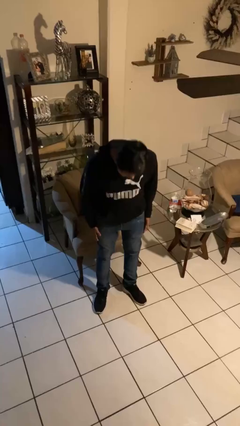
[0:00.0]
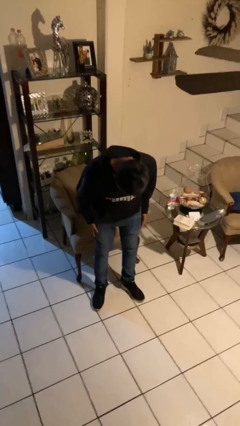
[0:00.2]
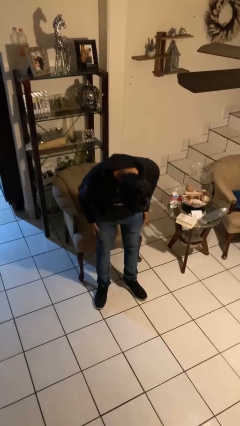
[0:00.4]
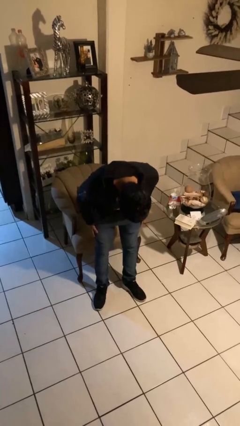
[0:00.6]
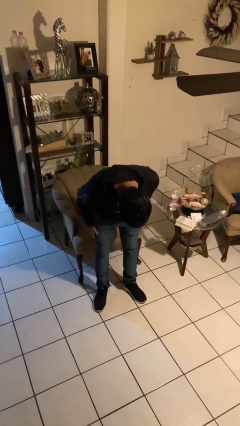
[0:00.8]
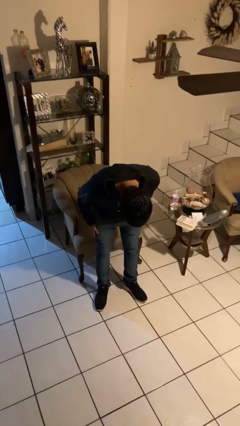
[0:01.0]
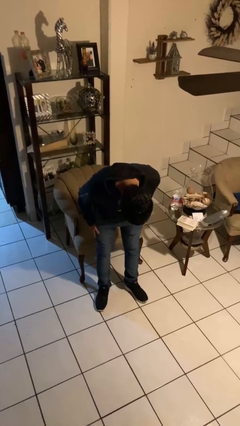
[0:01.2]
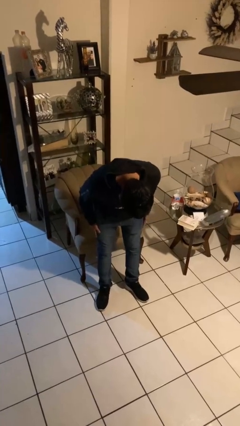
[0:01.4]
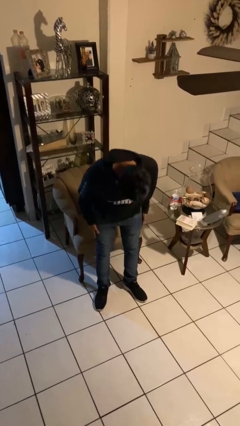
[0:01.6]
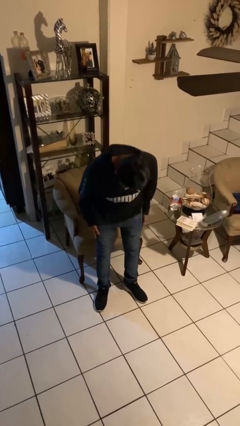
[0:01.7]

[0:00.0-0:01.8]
person bows

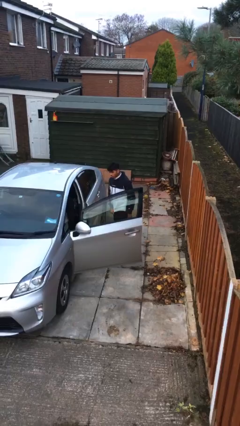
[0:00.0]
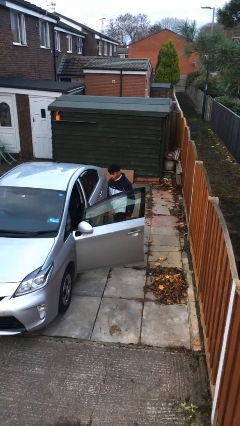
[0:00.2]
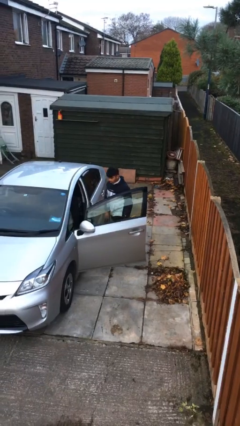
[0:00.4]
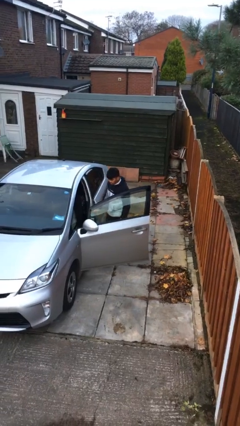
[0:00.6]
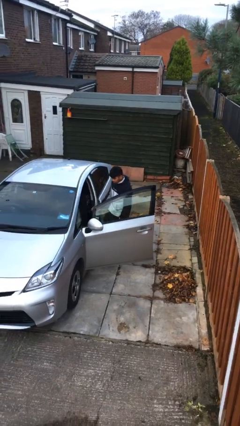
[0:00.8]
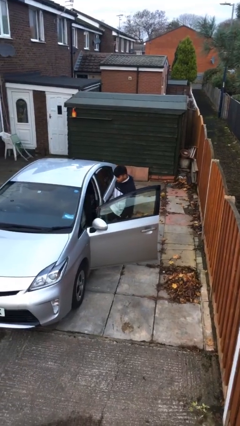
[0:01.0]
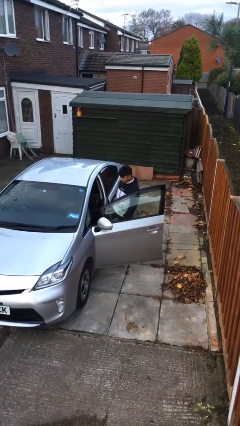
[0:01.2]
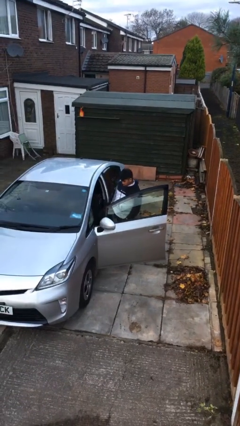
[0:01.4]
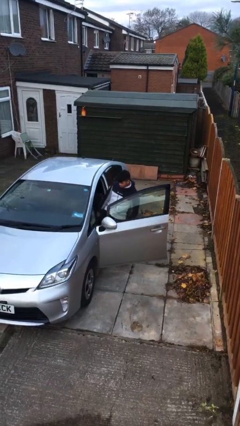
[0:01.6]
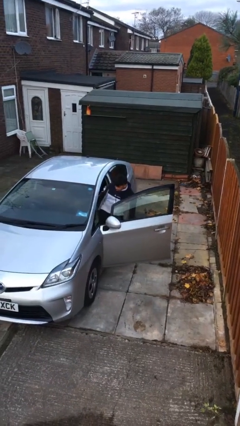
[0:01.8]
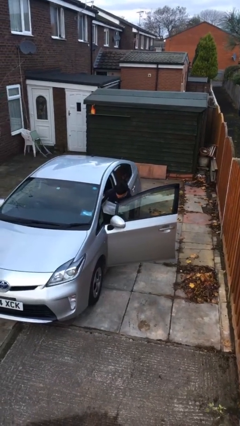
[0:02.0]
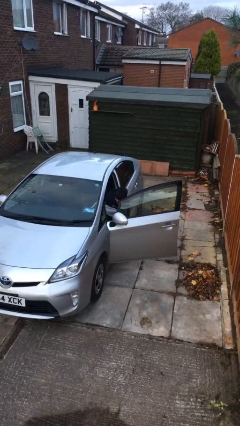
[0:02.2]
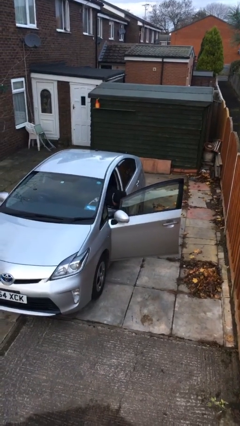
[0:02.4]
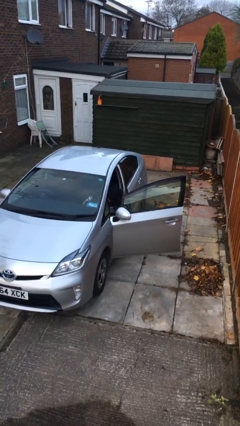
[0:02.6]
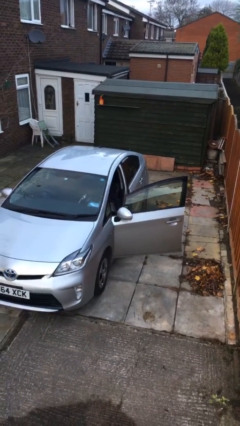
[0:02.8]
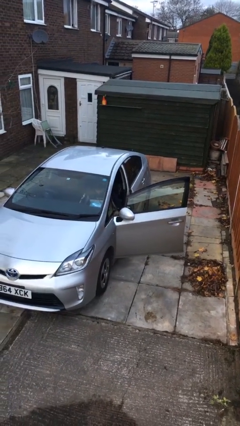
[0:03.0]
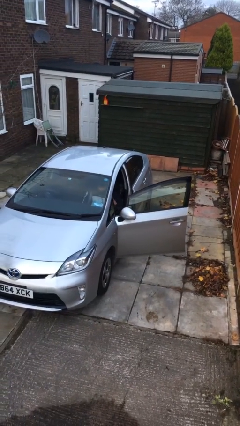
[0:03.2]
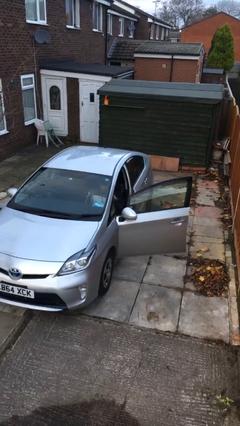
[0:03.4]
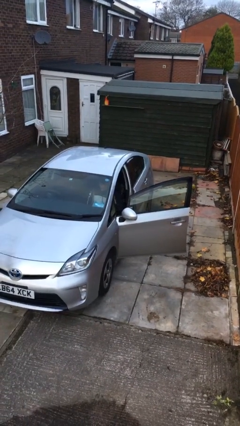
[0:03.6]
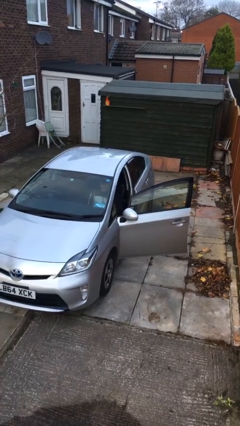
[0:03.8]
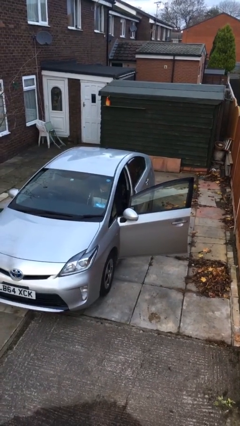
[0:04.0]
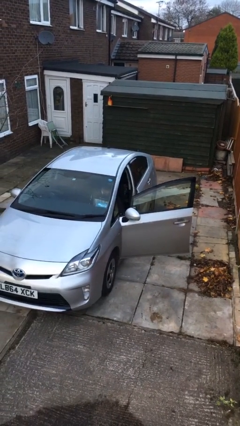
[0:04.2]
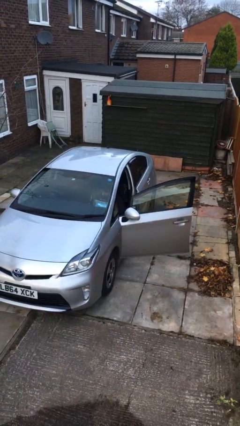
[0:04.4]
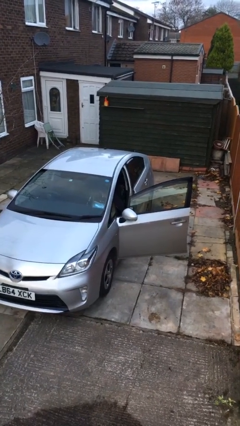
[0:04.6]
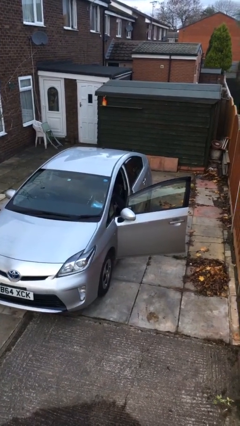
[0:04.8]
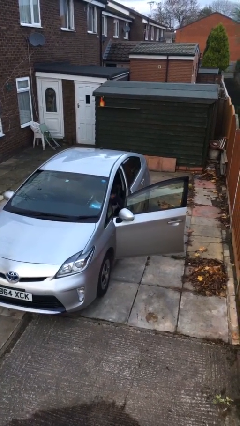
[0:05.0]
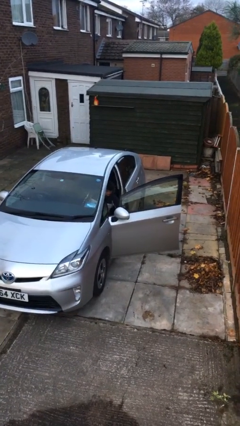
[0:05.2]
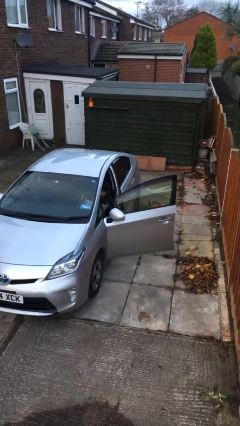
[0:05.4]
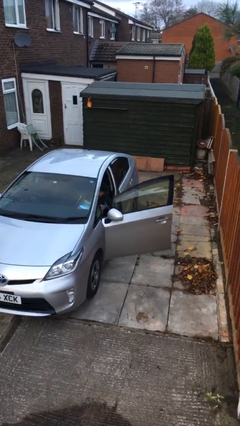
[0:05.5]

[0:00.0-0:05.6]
person enters car

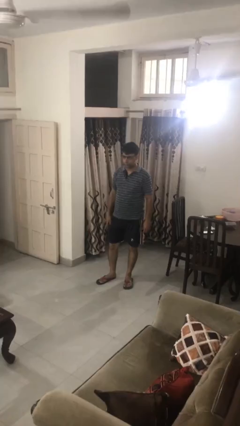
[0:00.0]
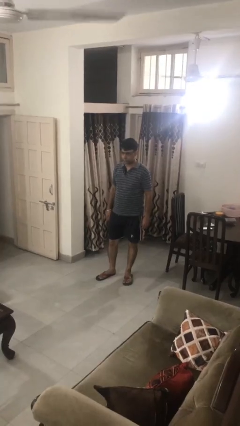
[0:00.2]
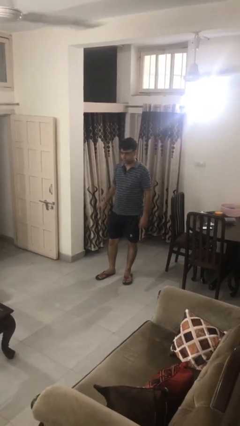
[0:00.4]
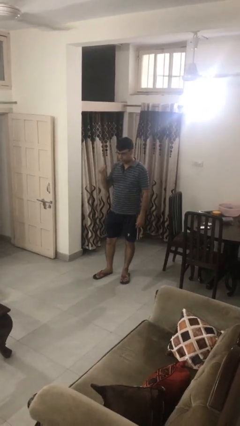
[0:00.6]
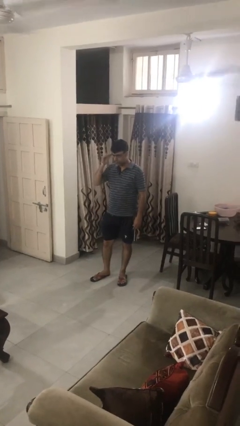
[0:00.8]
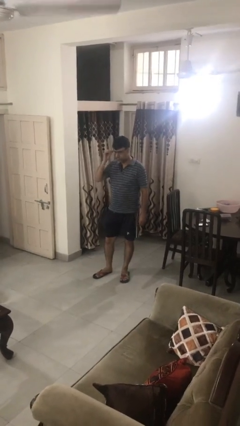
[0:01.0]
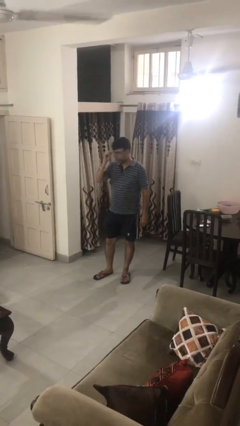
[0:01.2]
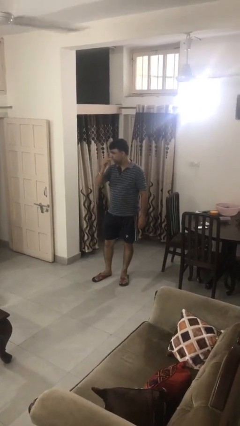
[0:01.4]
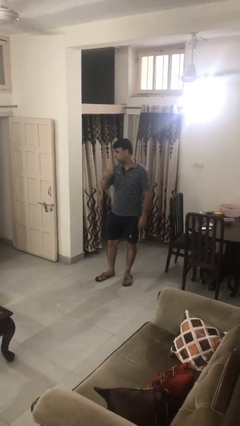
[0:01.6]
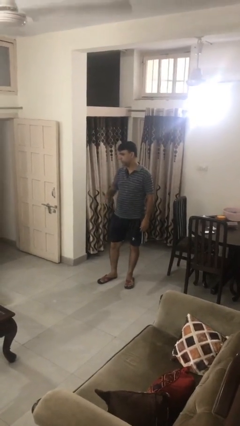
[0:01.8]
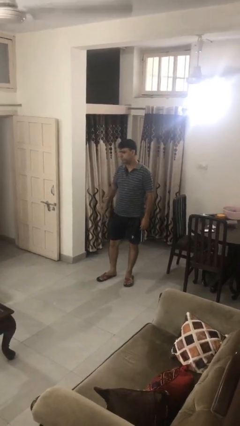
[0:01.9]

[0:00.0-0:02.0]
person takes off glasses

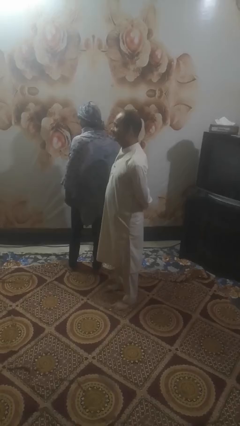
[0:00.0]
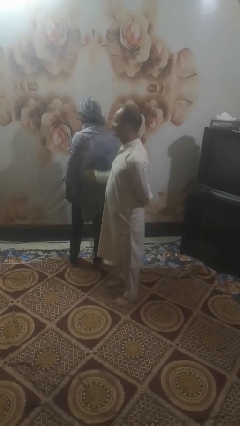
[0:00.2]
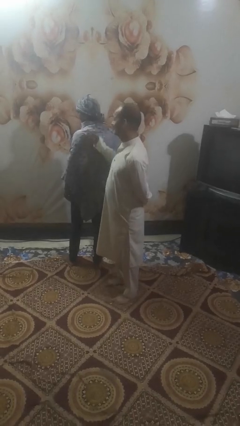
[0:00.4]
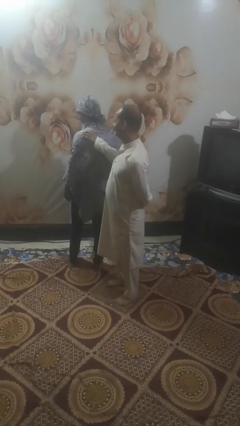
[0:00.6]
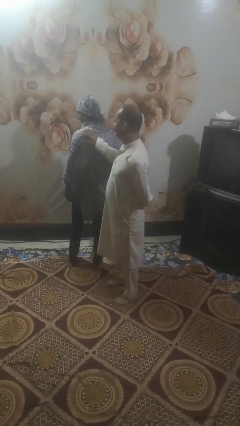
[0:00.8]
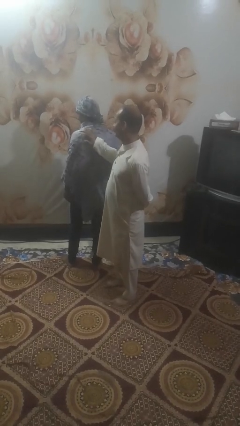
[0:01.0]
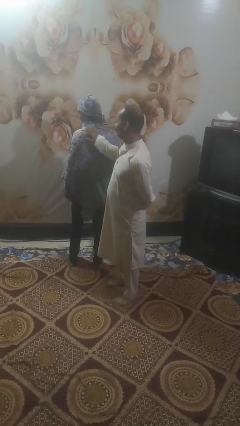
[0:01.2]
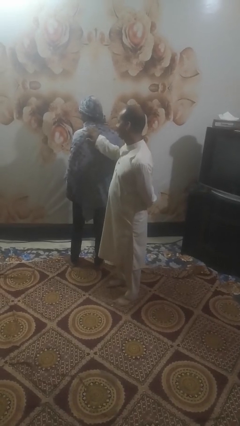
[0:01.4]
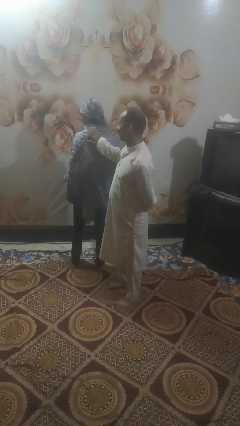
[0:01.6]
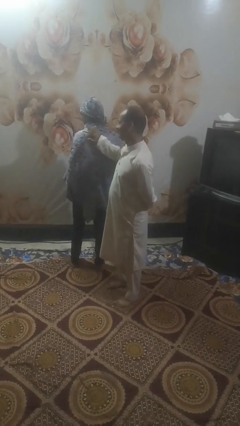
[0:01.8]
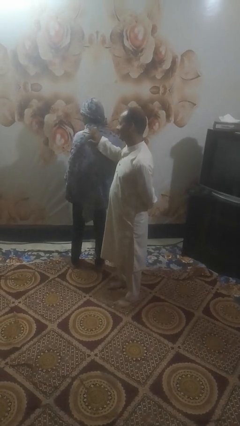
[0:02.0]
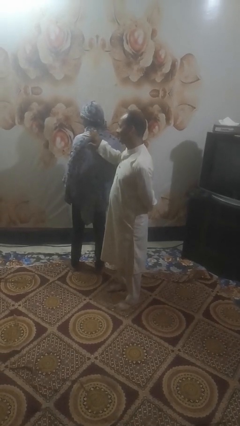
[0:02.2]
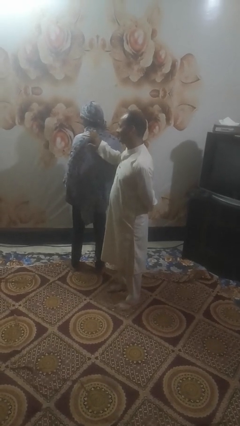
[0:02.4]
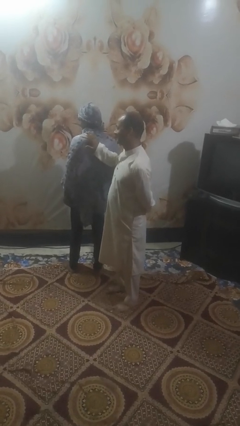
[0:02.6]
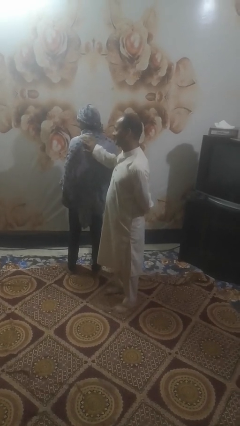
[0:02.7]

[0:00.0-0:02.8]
person touches back of person

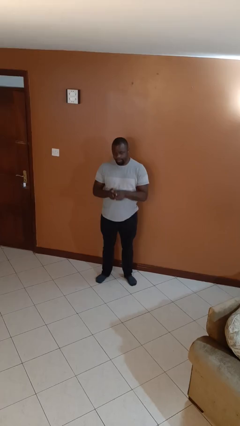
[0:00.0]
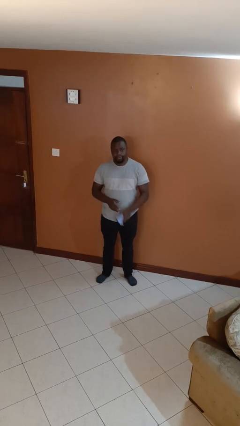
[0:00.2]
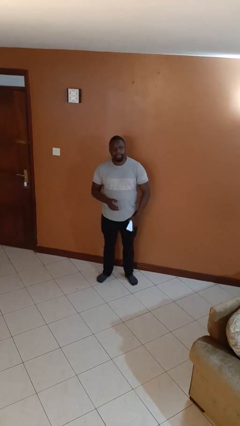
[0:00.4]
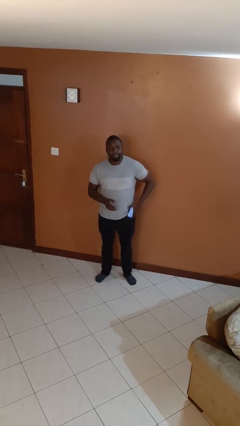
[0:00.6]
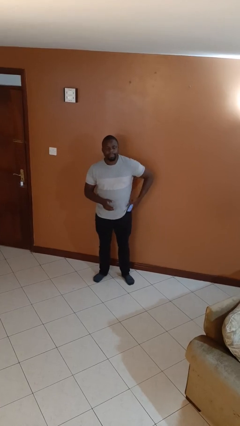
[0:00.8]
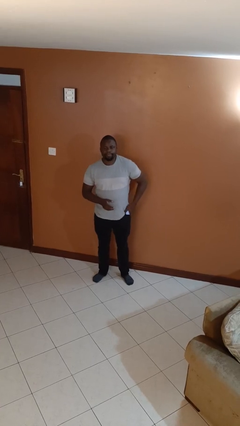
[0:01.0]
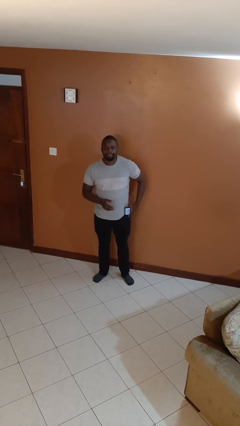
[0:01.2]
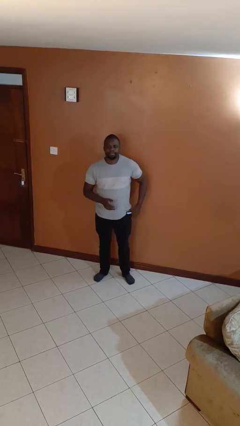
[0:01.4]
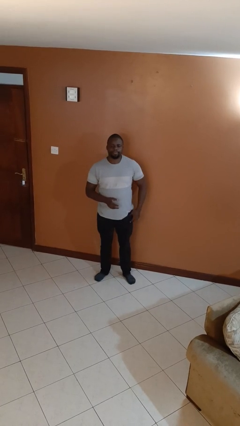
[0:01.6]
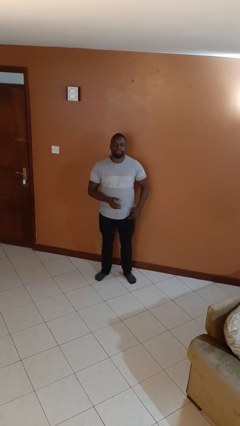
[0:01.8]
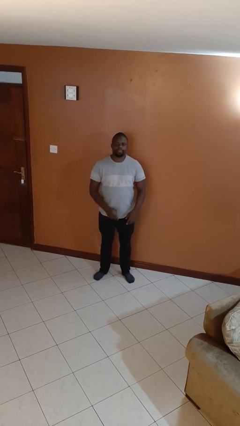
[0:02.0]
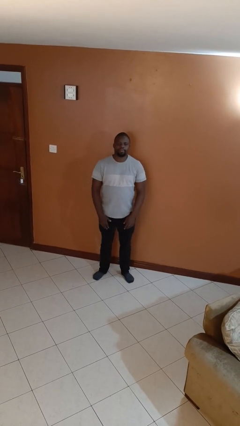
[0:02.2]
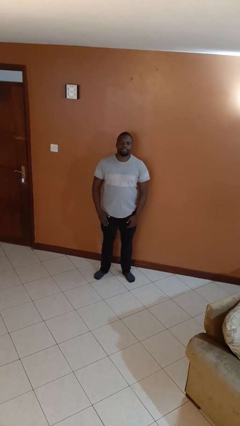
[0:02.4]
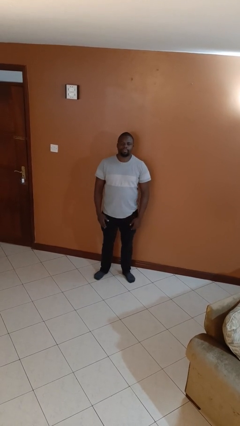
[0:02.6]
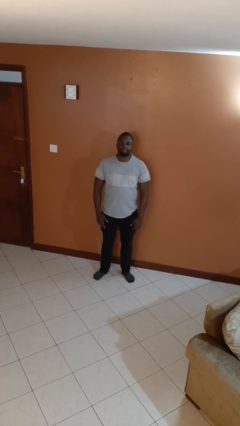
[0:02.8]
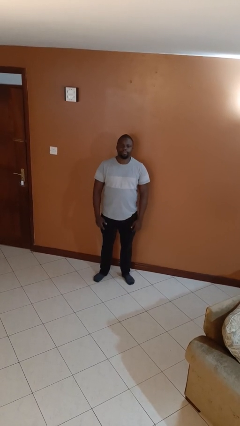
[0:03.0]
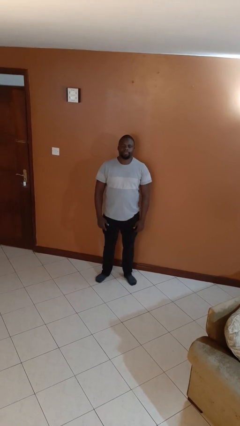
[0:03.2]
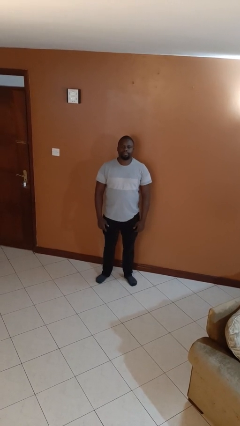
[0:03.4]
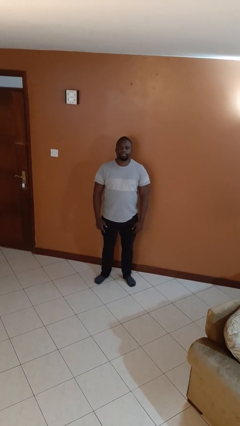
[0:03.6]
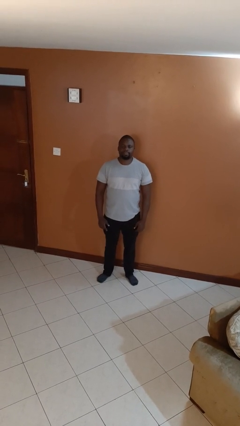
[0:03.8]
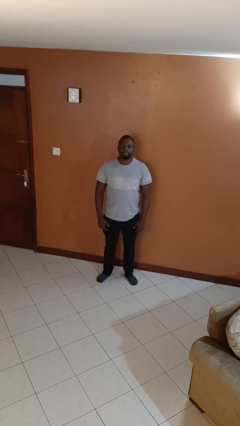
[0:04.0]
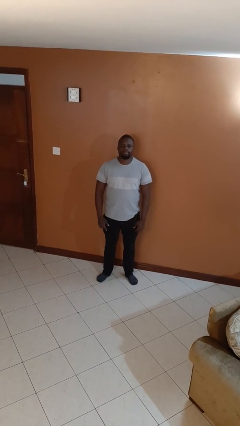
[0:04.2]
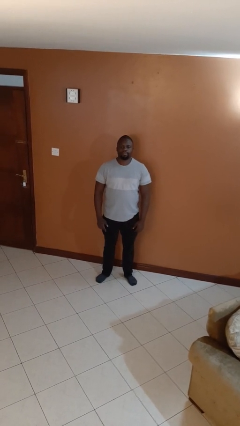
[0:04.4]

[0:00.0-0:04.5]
person puts phone into pocket

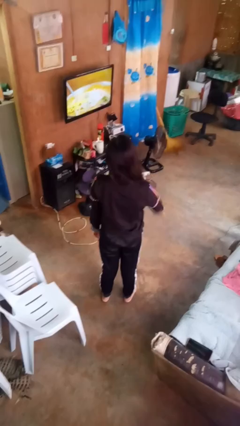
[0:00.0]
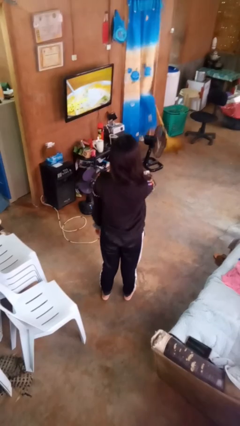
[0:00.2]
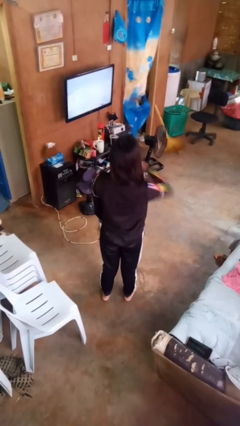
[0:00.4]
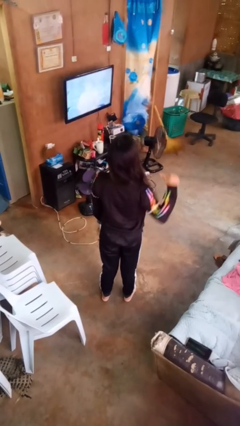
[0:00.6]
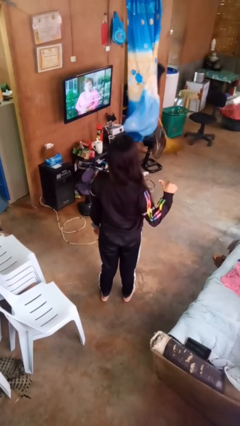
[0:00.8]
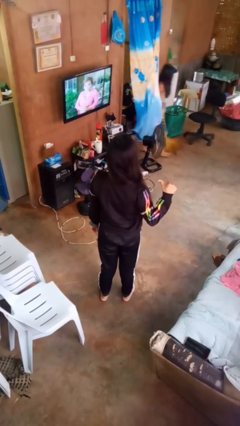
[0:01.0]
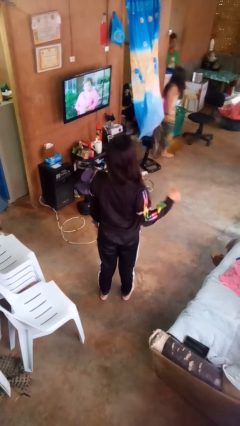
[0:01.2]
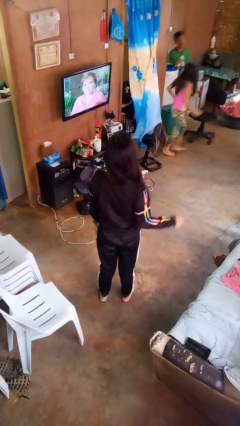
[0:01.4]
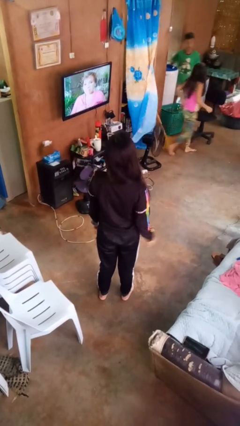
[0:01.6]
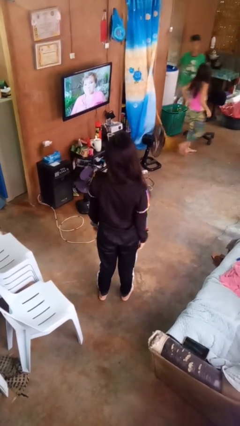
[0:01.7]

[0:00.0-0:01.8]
person gestures cut
